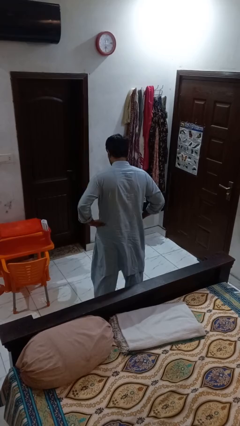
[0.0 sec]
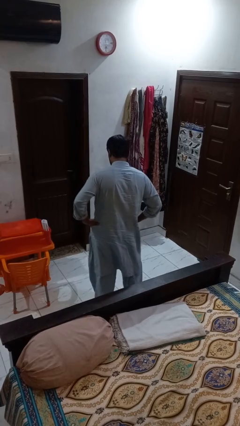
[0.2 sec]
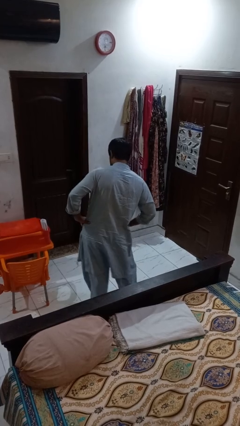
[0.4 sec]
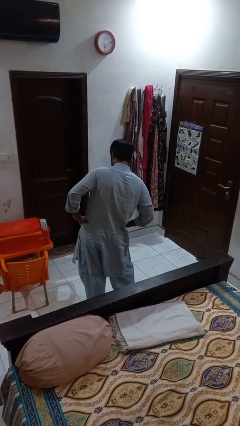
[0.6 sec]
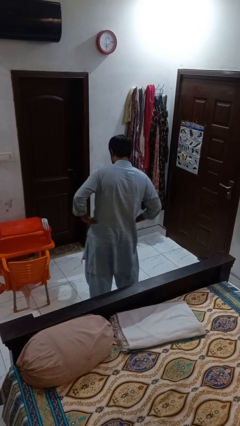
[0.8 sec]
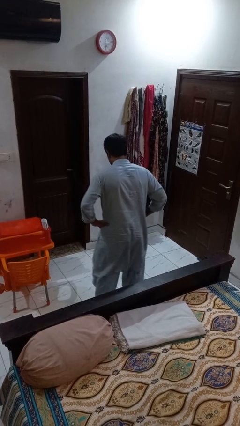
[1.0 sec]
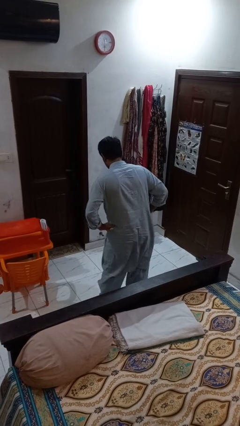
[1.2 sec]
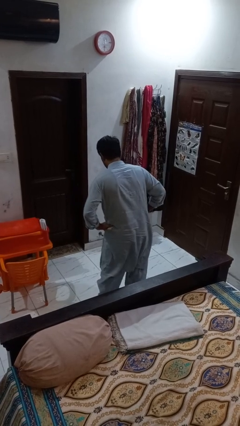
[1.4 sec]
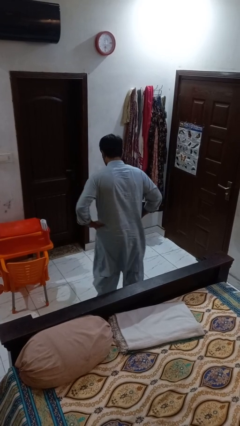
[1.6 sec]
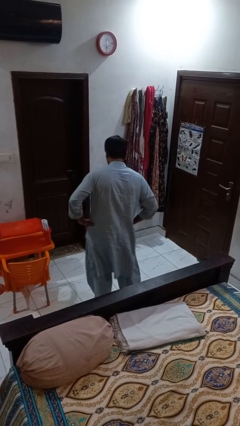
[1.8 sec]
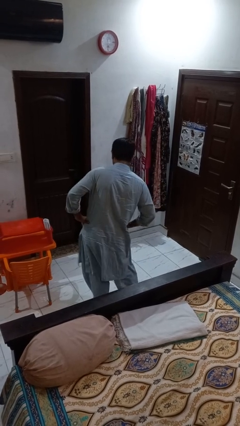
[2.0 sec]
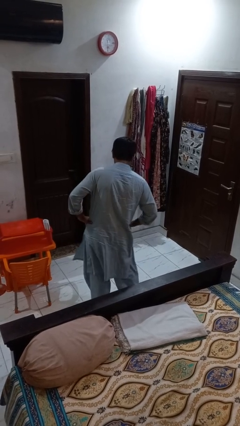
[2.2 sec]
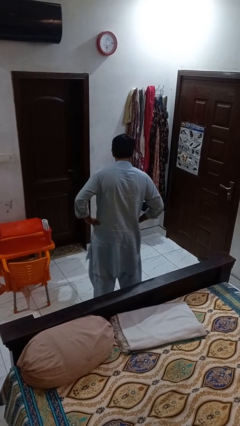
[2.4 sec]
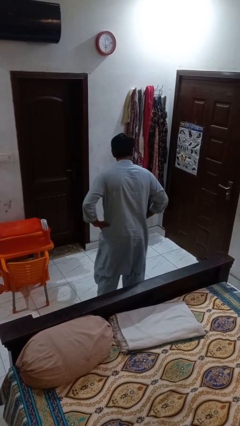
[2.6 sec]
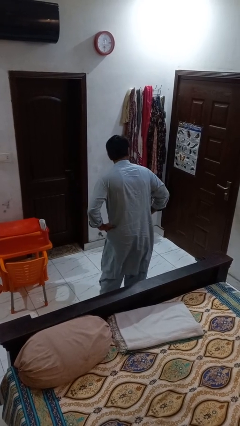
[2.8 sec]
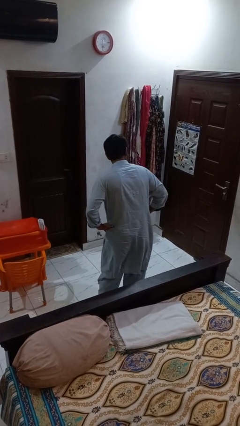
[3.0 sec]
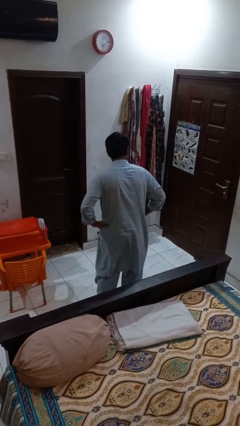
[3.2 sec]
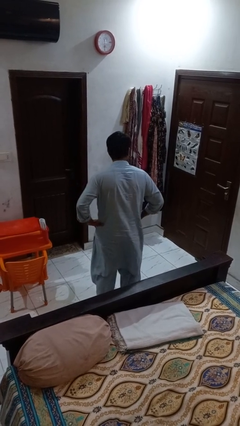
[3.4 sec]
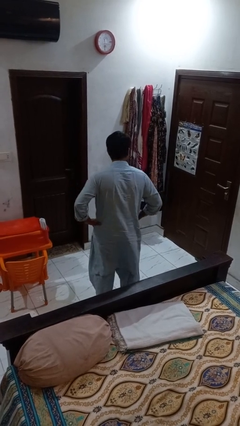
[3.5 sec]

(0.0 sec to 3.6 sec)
person wiggles hips

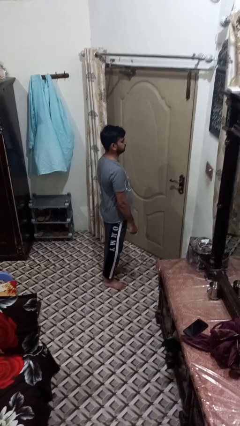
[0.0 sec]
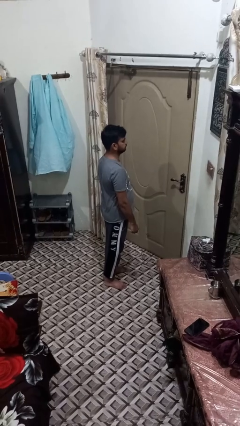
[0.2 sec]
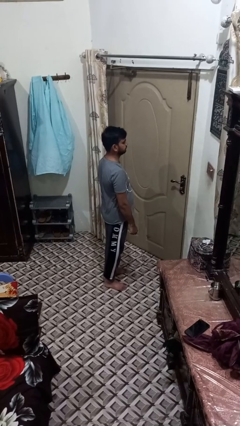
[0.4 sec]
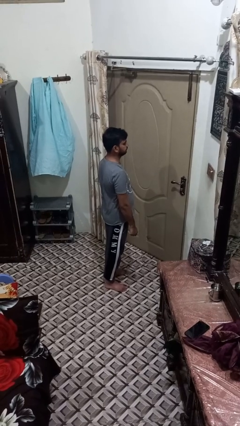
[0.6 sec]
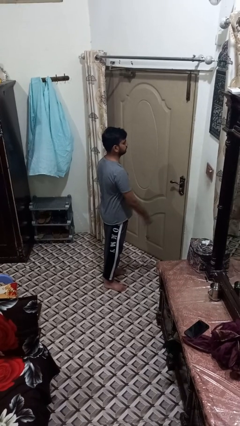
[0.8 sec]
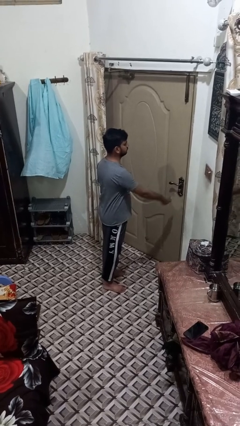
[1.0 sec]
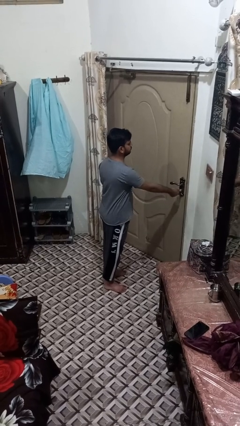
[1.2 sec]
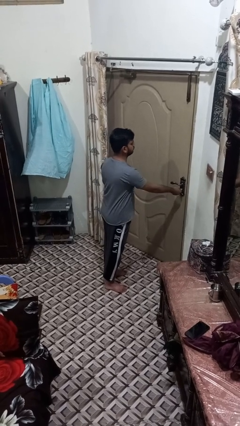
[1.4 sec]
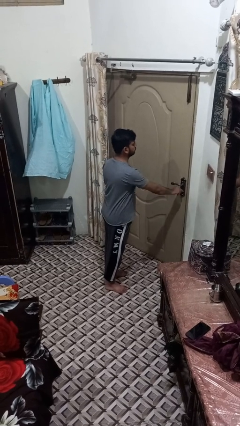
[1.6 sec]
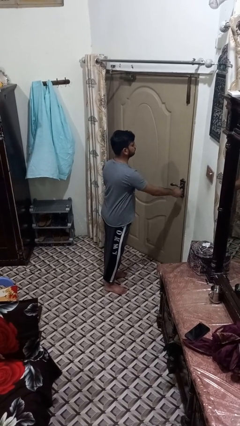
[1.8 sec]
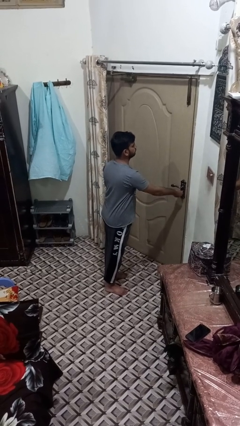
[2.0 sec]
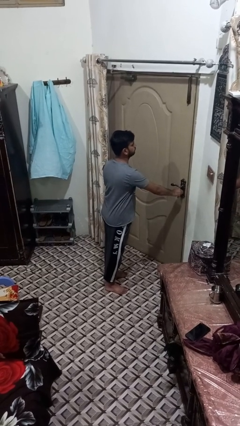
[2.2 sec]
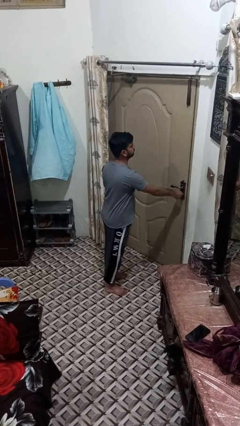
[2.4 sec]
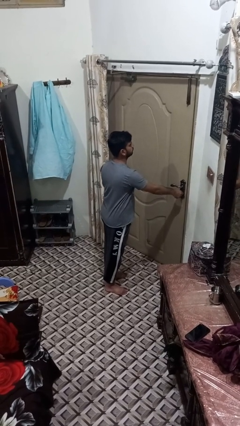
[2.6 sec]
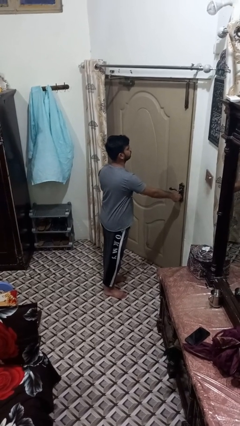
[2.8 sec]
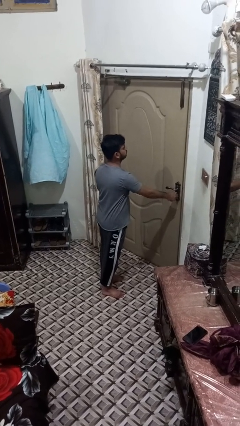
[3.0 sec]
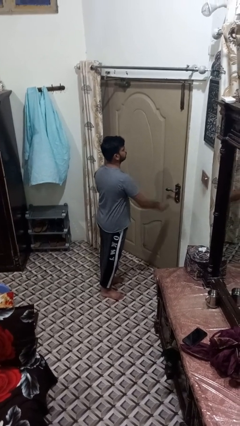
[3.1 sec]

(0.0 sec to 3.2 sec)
person unlocks door with keys

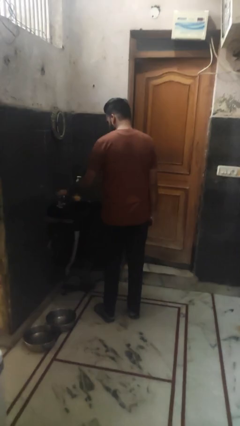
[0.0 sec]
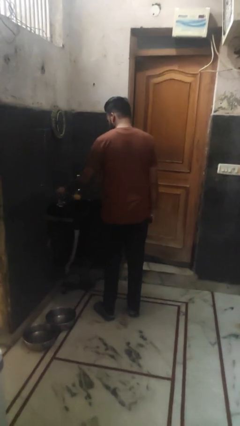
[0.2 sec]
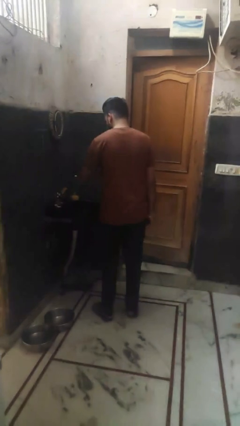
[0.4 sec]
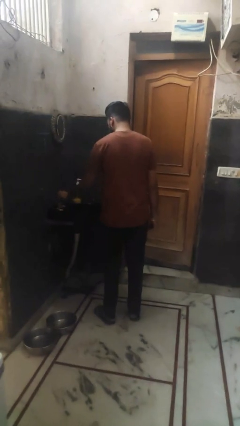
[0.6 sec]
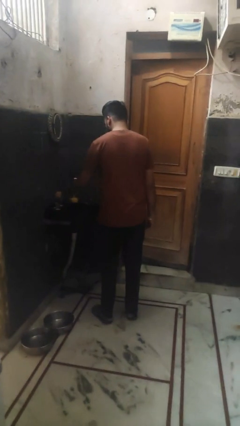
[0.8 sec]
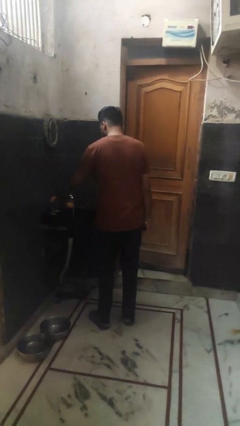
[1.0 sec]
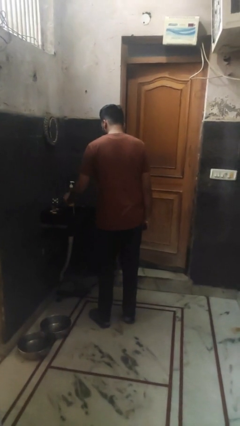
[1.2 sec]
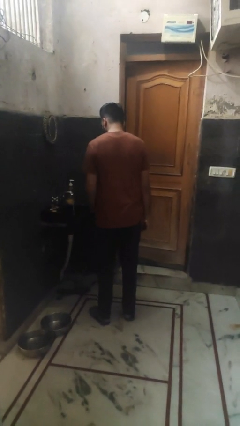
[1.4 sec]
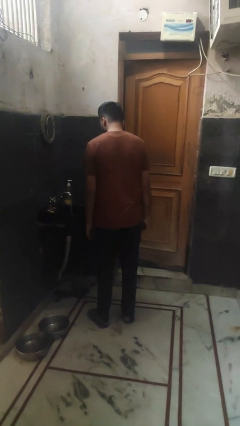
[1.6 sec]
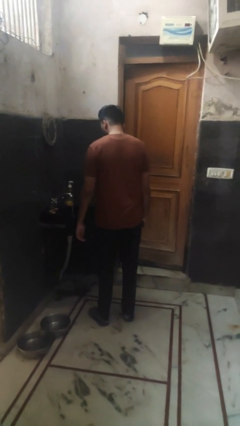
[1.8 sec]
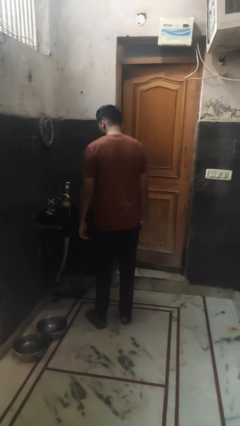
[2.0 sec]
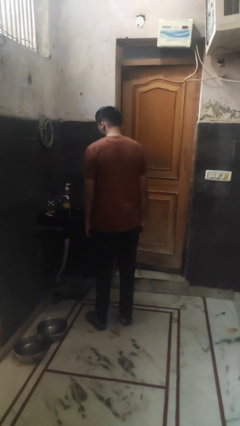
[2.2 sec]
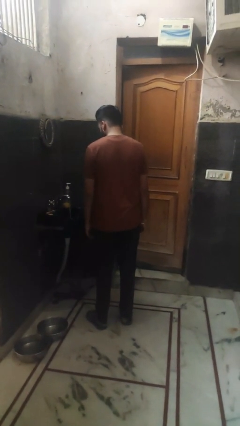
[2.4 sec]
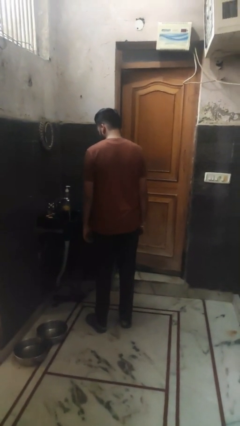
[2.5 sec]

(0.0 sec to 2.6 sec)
person turns on faucet

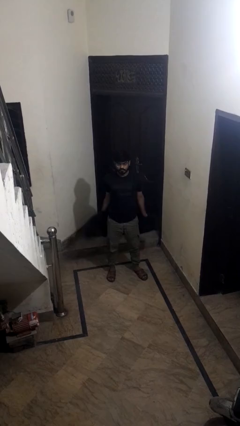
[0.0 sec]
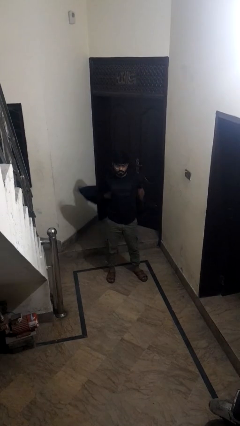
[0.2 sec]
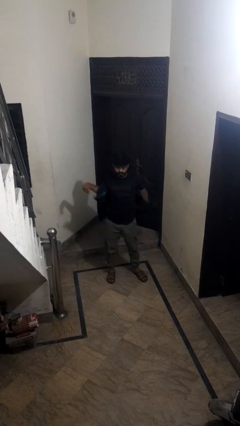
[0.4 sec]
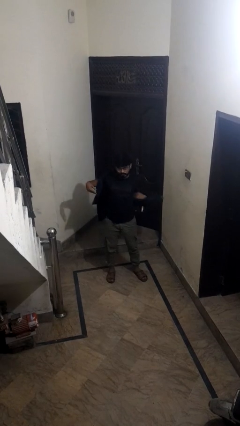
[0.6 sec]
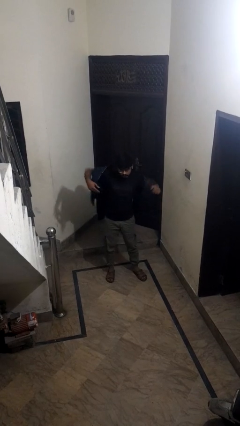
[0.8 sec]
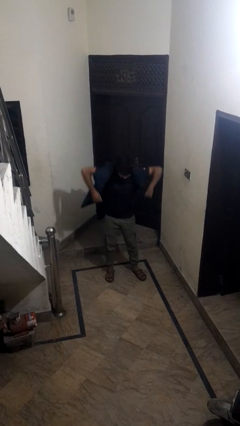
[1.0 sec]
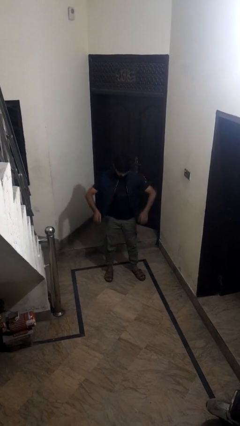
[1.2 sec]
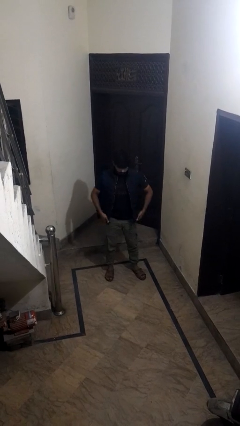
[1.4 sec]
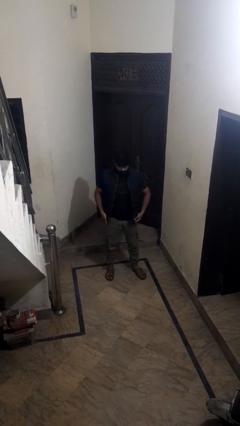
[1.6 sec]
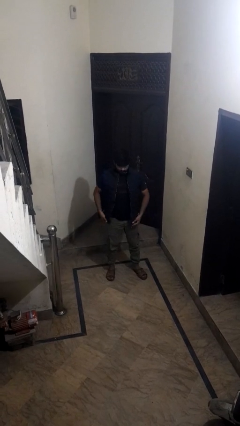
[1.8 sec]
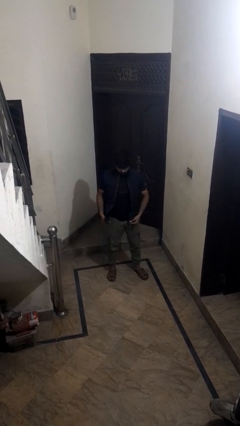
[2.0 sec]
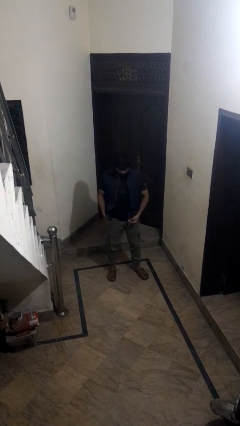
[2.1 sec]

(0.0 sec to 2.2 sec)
person puts on jacket

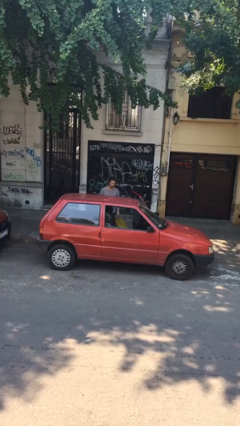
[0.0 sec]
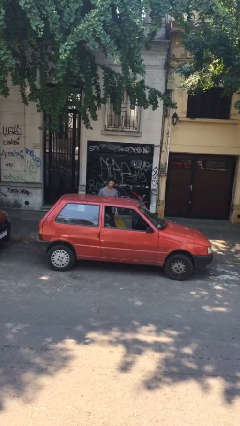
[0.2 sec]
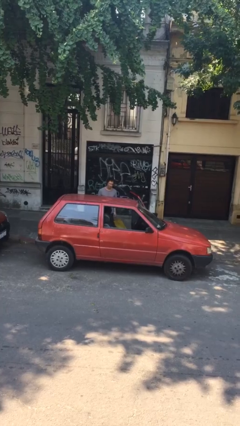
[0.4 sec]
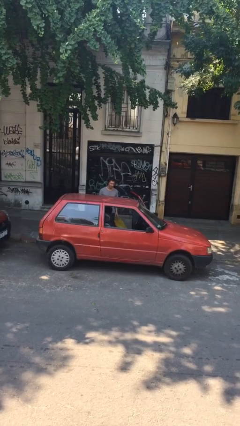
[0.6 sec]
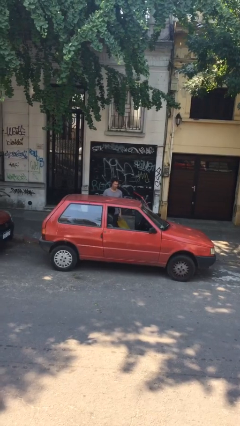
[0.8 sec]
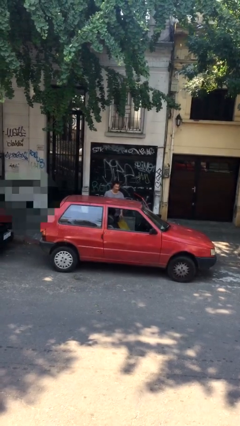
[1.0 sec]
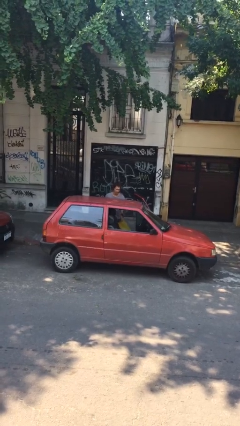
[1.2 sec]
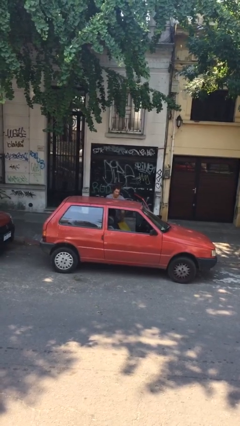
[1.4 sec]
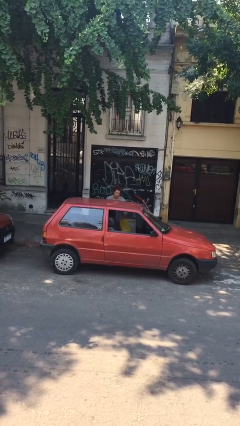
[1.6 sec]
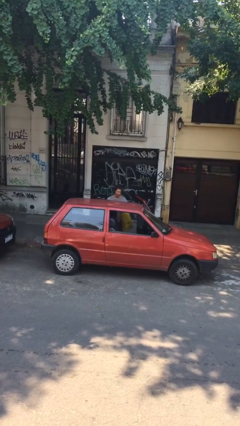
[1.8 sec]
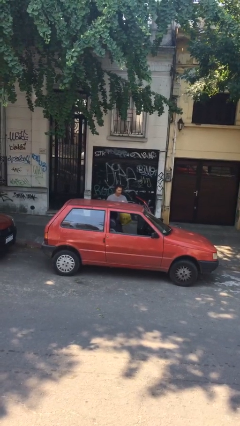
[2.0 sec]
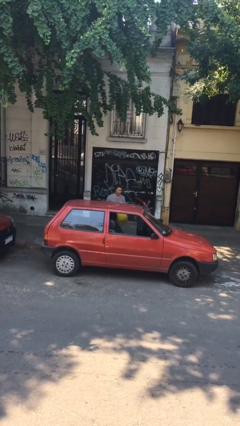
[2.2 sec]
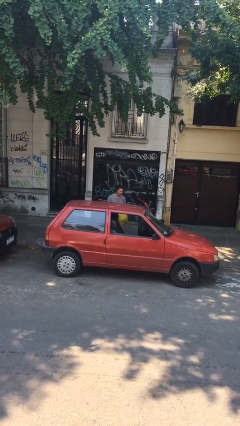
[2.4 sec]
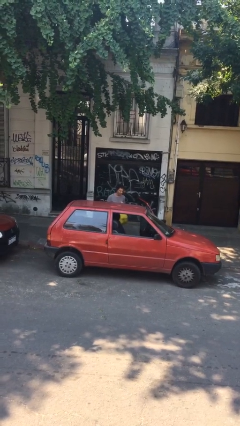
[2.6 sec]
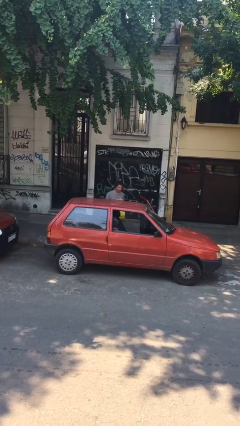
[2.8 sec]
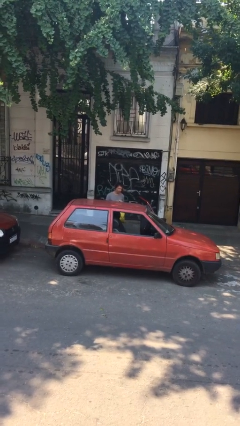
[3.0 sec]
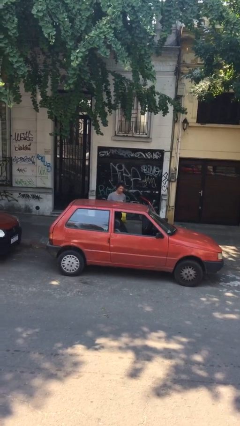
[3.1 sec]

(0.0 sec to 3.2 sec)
person unloads car

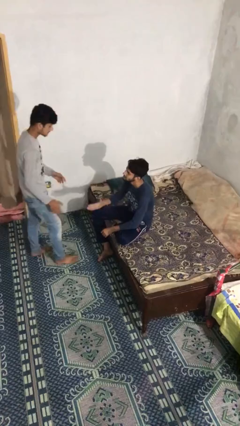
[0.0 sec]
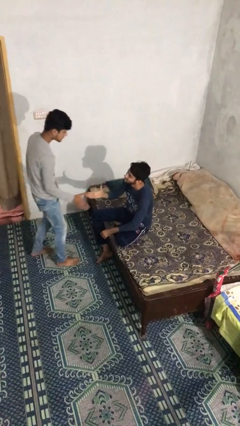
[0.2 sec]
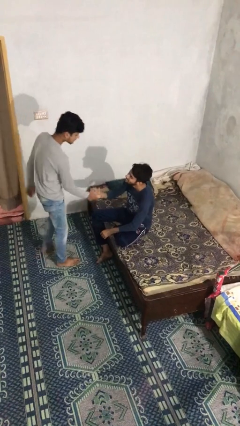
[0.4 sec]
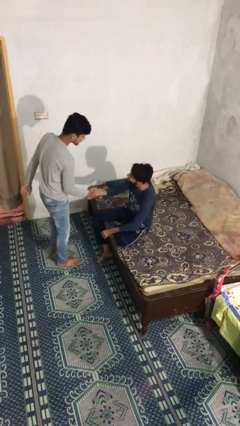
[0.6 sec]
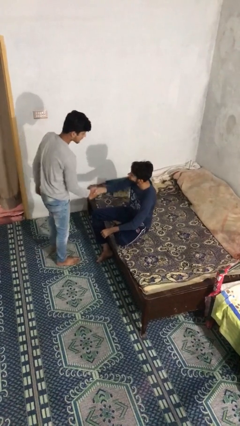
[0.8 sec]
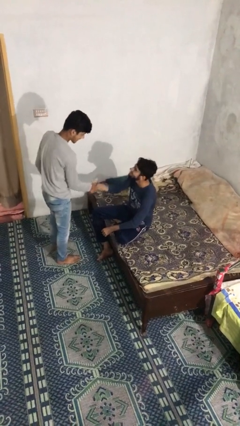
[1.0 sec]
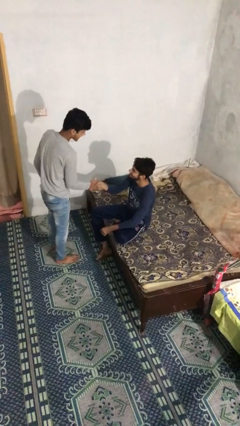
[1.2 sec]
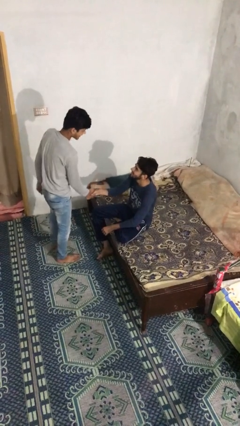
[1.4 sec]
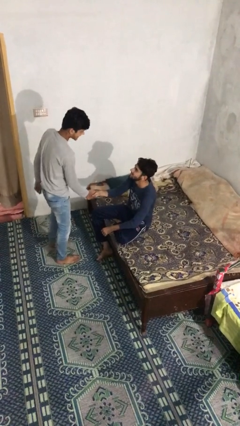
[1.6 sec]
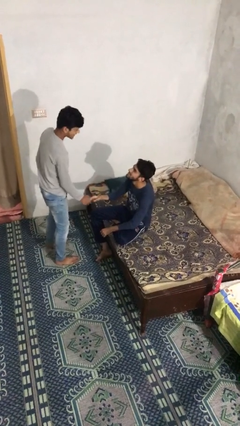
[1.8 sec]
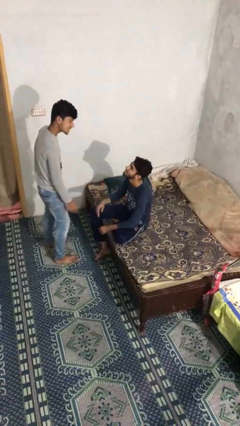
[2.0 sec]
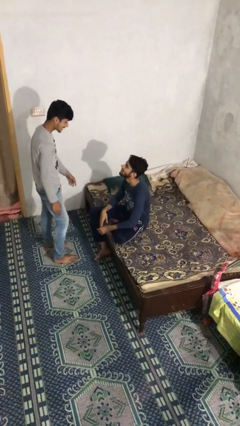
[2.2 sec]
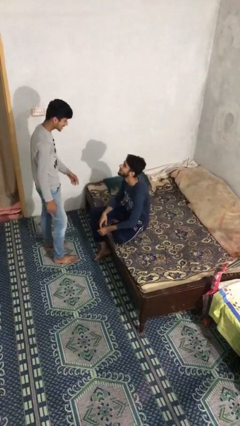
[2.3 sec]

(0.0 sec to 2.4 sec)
person shakes hand
